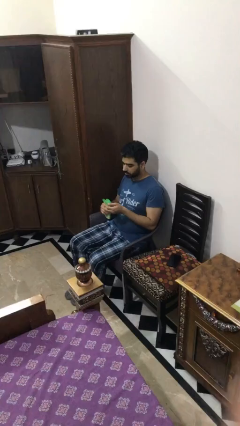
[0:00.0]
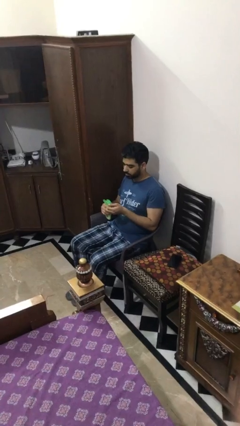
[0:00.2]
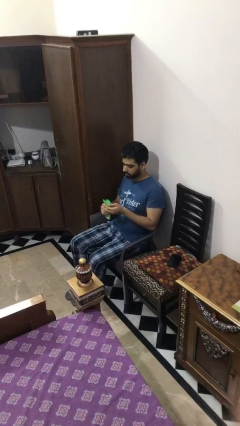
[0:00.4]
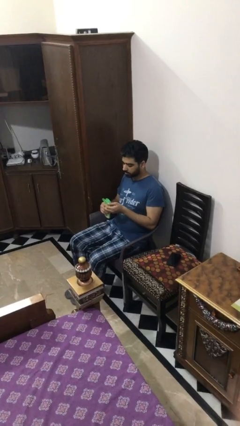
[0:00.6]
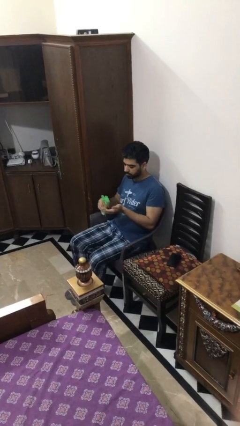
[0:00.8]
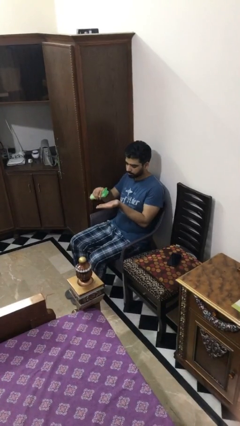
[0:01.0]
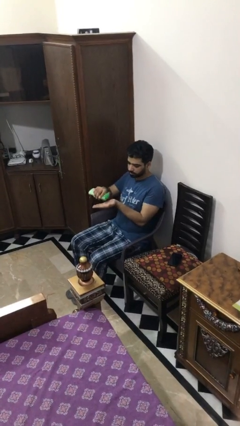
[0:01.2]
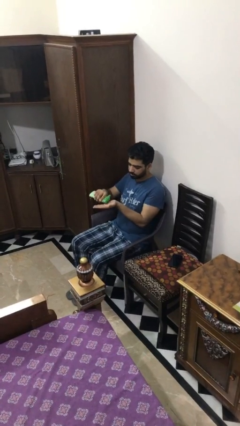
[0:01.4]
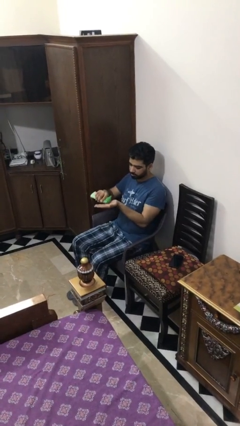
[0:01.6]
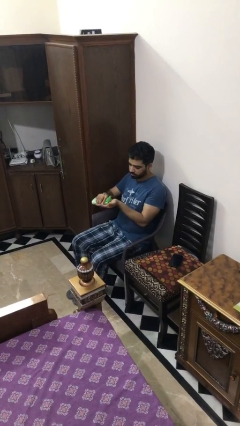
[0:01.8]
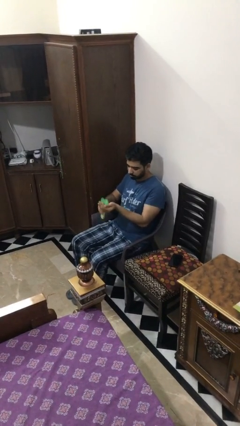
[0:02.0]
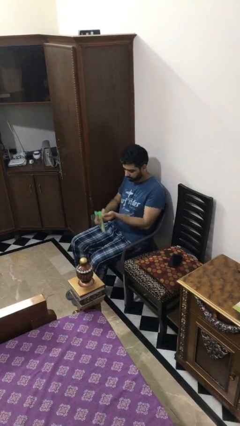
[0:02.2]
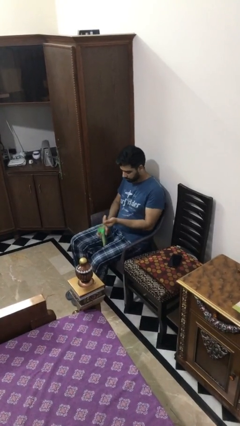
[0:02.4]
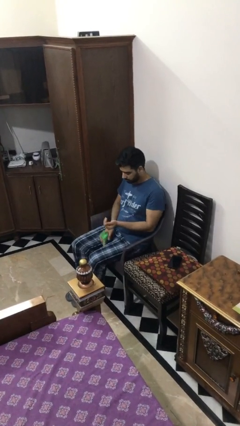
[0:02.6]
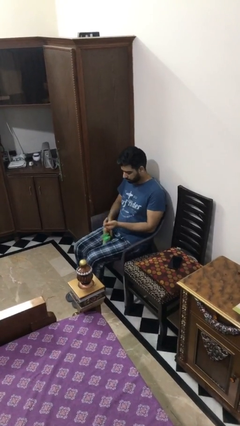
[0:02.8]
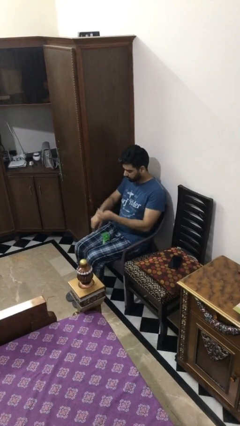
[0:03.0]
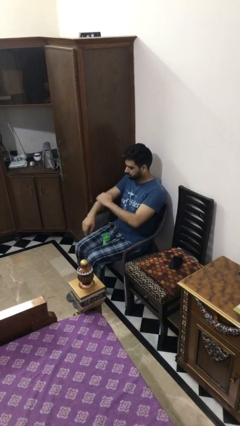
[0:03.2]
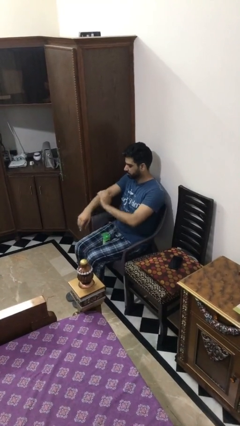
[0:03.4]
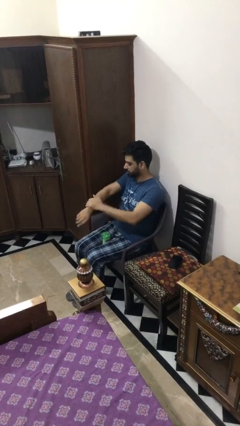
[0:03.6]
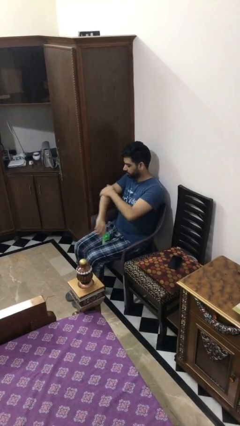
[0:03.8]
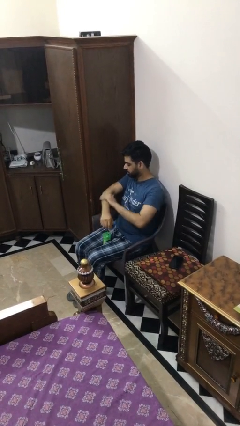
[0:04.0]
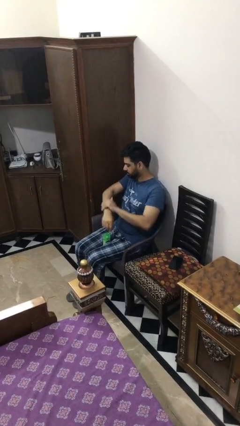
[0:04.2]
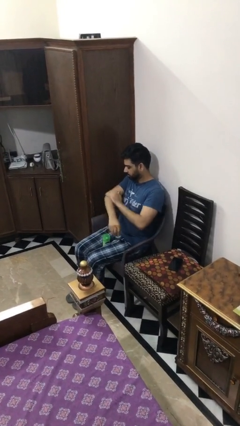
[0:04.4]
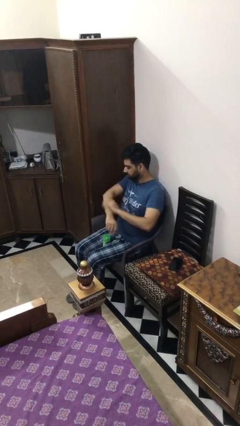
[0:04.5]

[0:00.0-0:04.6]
person applies sunscreen

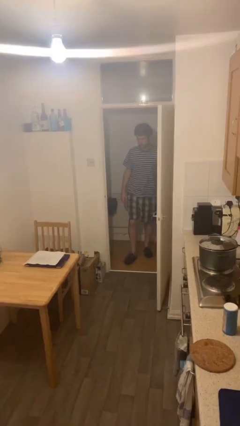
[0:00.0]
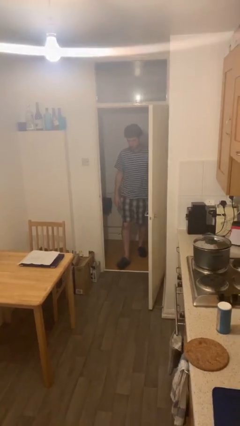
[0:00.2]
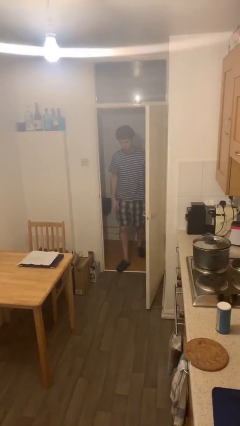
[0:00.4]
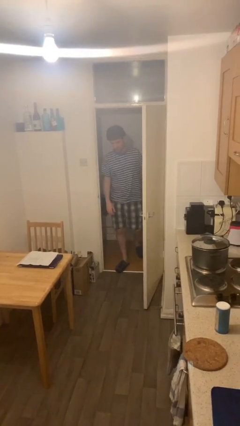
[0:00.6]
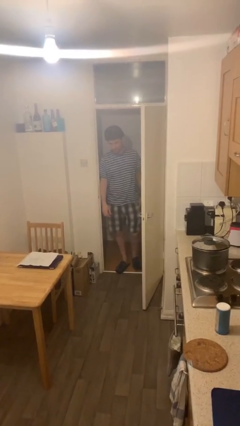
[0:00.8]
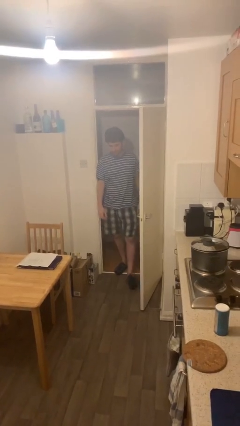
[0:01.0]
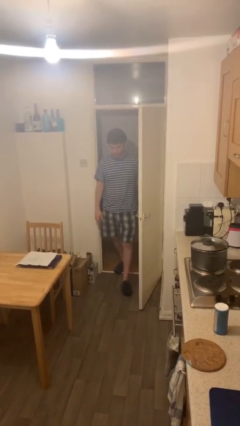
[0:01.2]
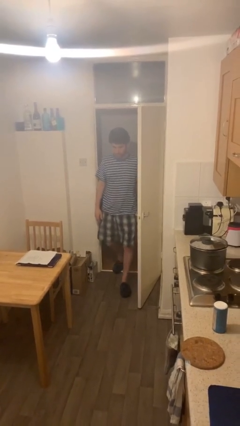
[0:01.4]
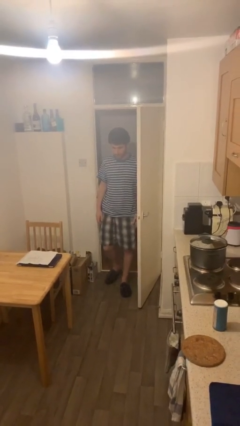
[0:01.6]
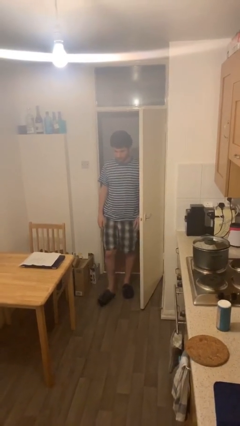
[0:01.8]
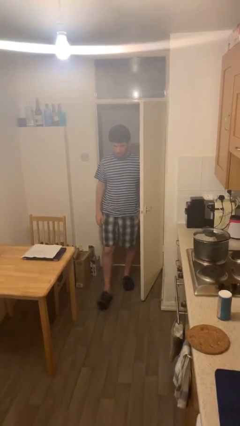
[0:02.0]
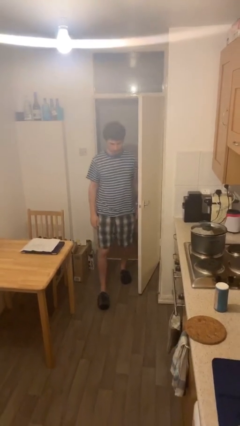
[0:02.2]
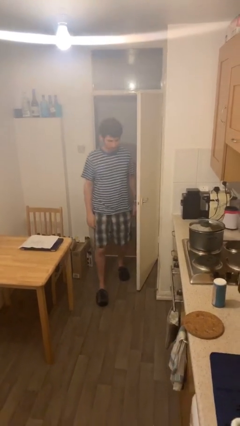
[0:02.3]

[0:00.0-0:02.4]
person enters scene through structure

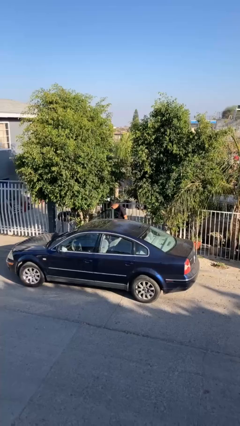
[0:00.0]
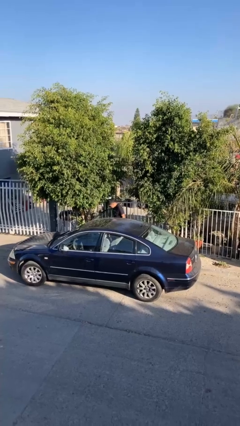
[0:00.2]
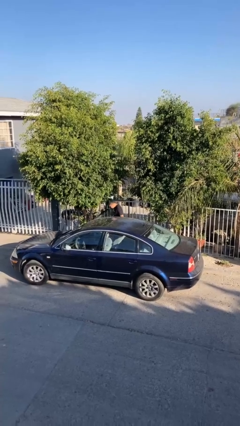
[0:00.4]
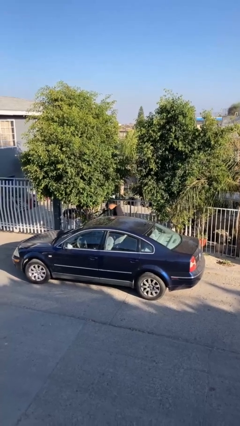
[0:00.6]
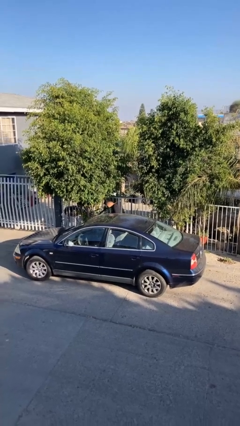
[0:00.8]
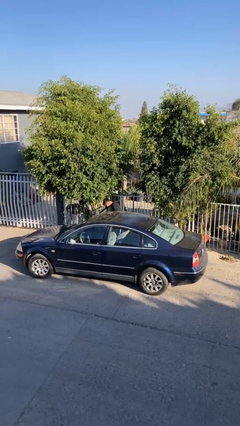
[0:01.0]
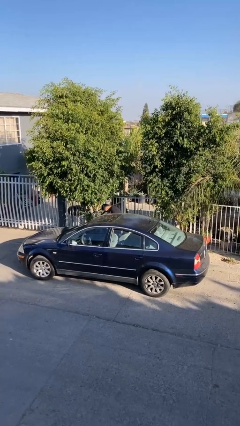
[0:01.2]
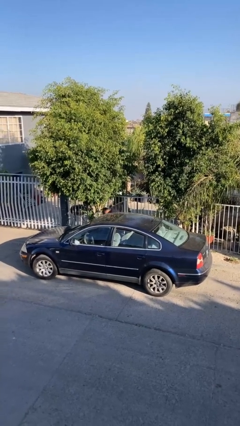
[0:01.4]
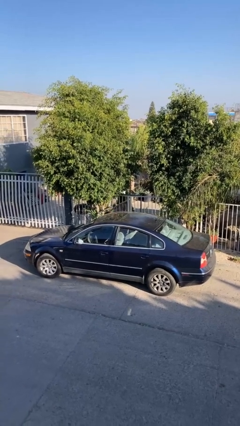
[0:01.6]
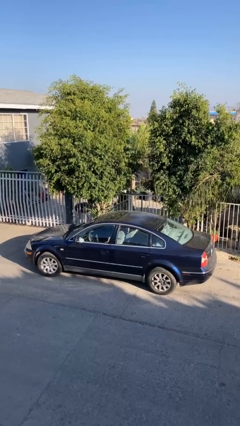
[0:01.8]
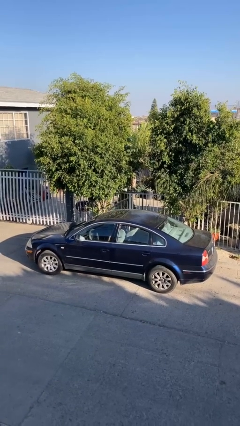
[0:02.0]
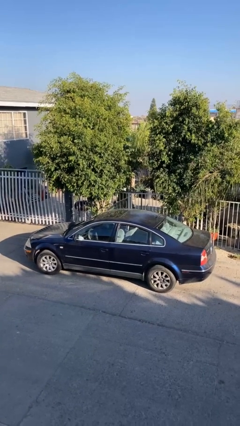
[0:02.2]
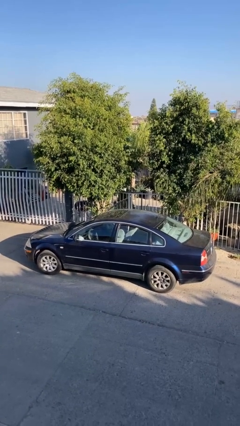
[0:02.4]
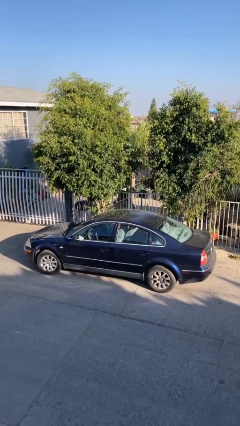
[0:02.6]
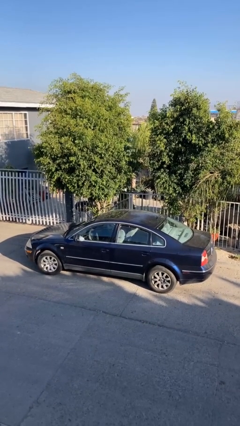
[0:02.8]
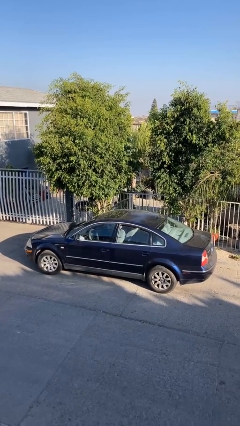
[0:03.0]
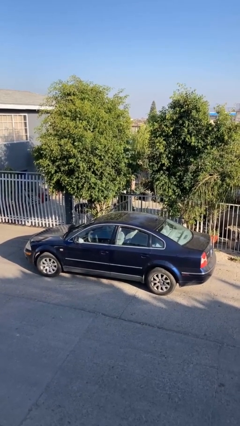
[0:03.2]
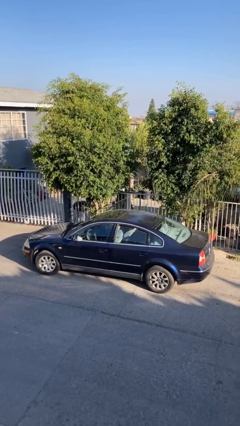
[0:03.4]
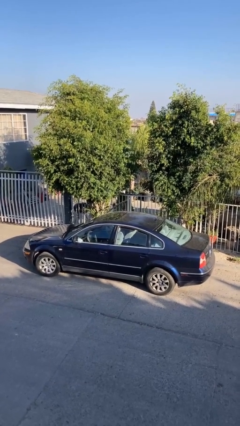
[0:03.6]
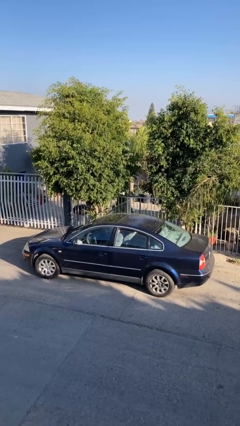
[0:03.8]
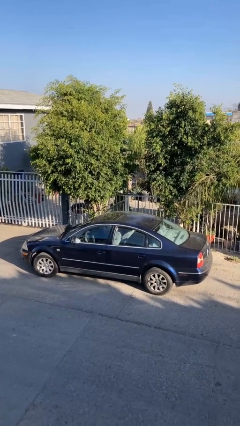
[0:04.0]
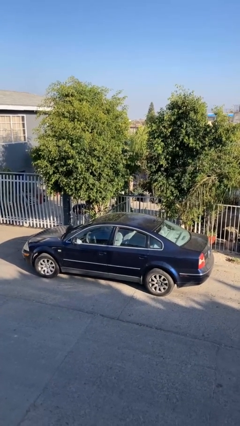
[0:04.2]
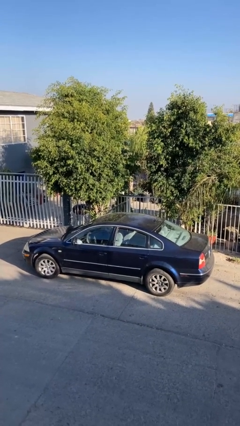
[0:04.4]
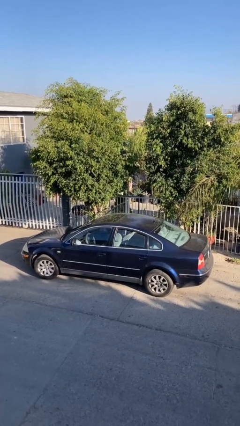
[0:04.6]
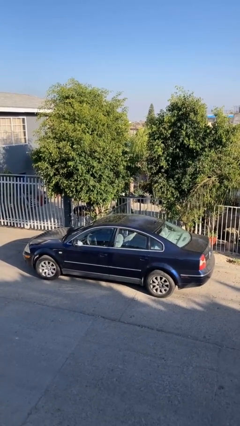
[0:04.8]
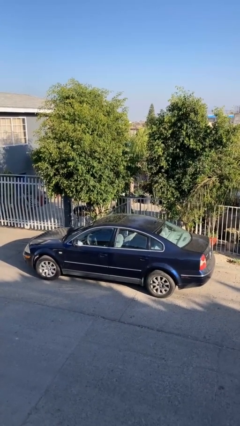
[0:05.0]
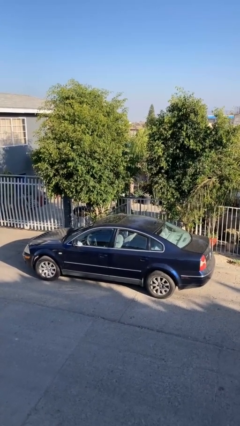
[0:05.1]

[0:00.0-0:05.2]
person enters car

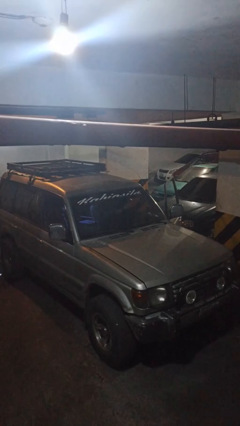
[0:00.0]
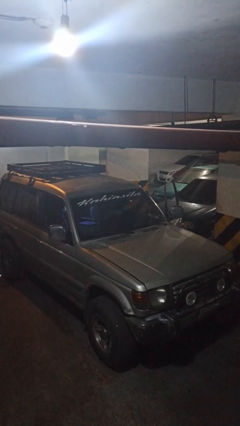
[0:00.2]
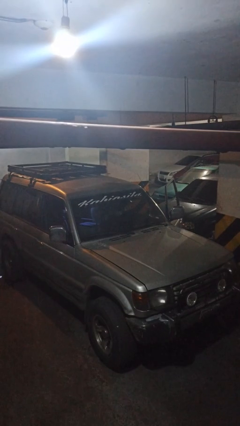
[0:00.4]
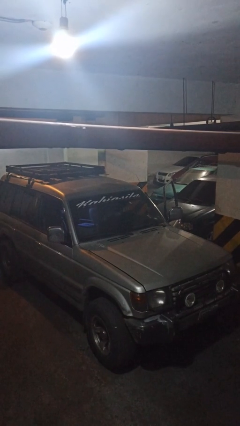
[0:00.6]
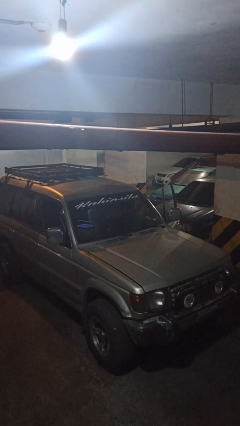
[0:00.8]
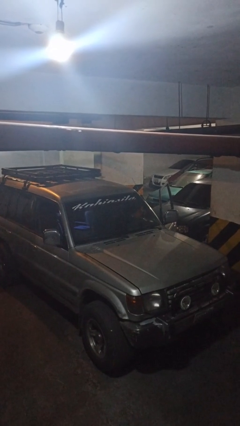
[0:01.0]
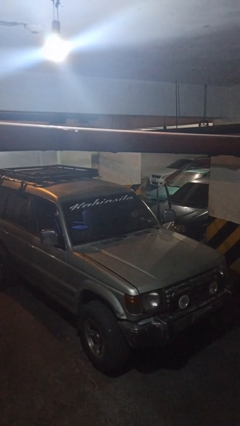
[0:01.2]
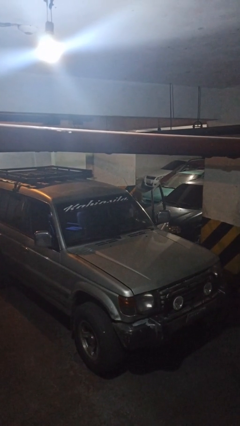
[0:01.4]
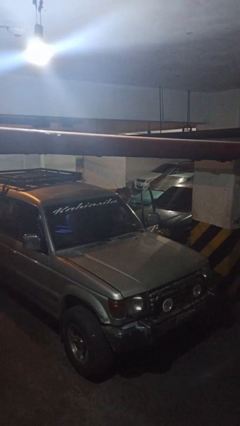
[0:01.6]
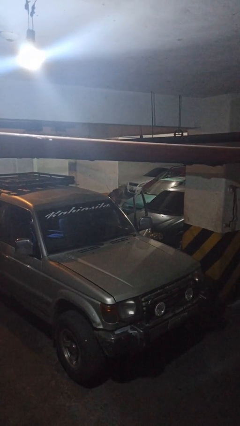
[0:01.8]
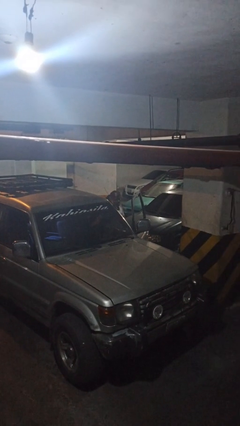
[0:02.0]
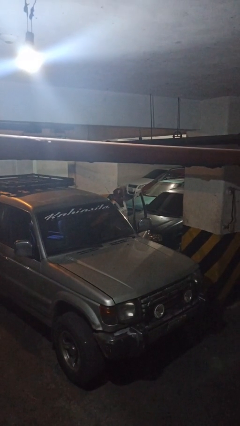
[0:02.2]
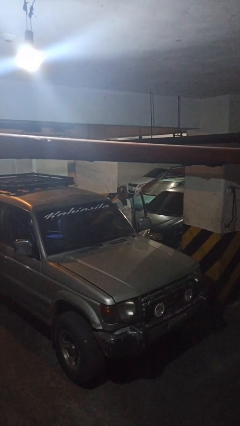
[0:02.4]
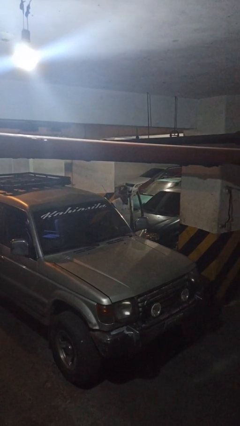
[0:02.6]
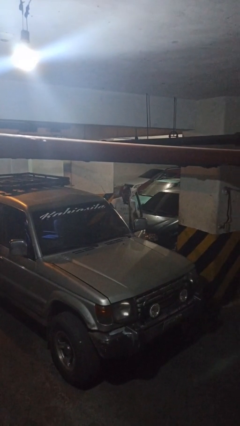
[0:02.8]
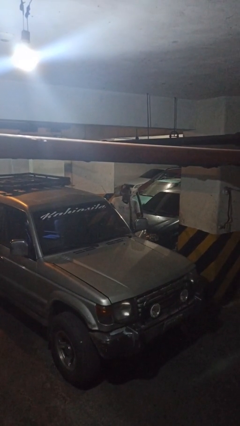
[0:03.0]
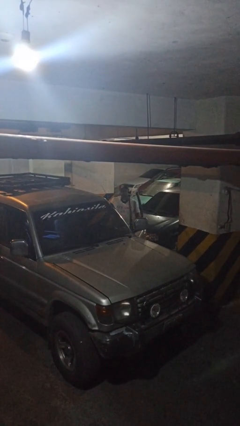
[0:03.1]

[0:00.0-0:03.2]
person exits car

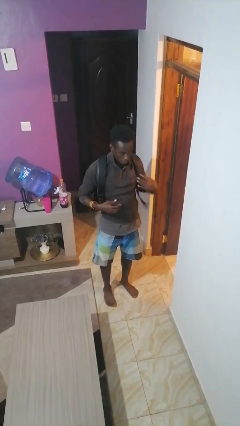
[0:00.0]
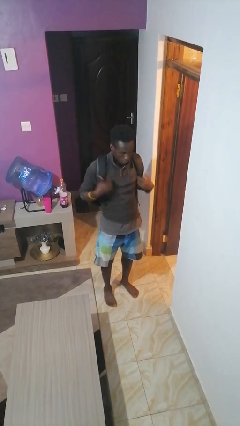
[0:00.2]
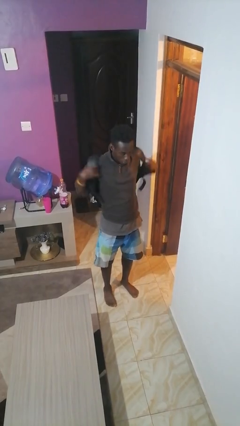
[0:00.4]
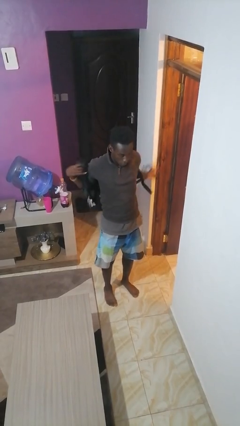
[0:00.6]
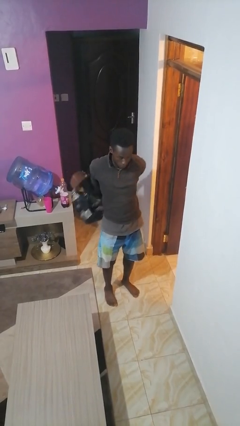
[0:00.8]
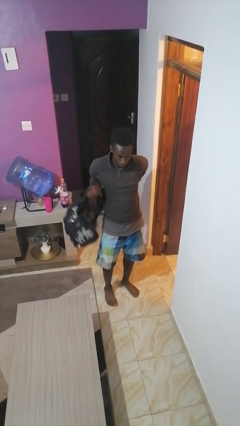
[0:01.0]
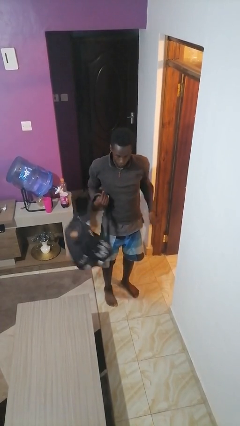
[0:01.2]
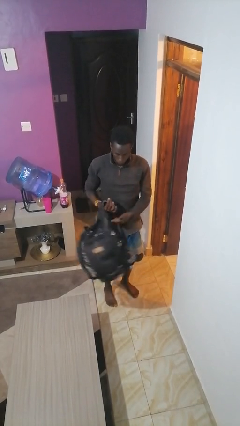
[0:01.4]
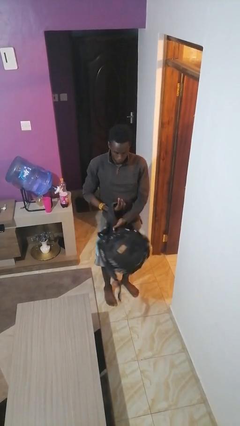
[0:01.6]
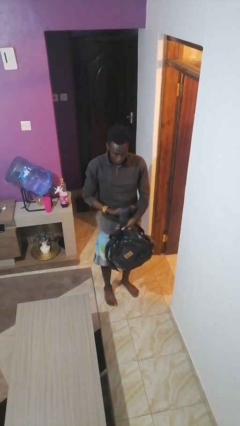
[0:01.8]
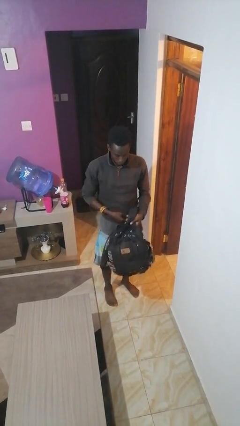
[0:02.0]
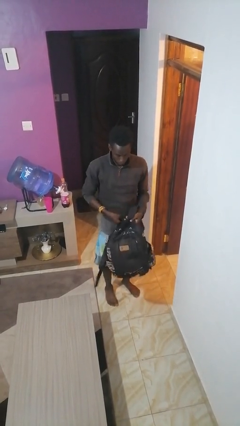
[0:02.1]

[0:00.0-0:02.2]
person takes off backpack
